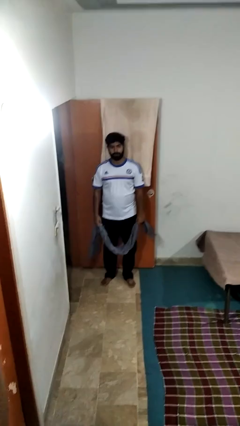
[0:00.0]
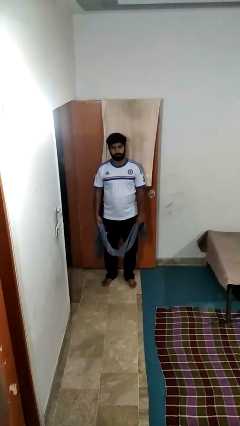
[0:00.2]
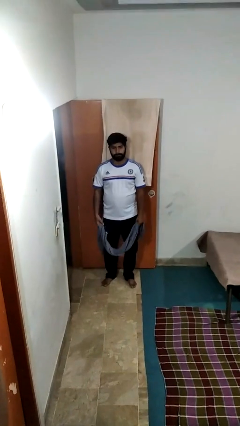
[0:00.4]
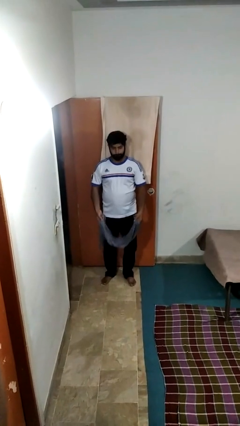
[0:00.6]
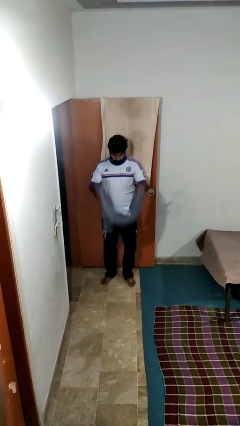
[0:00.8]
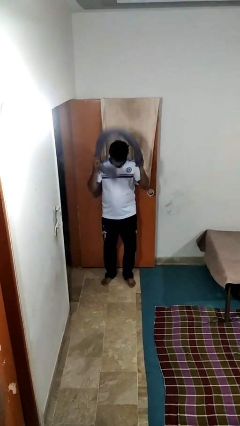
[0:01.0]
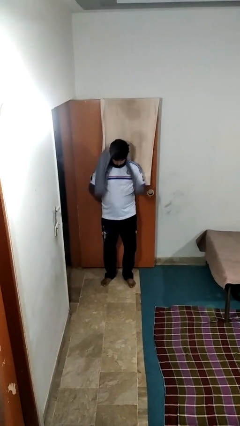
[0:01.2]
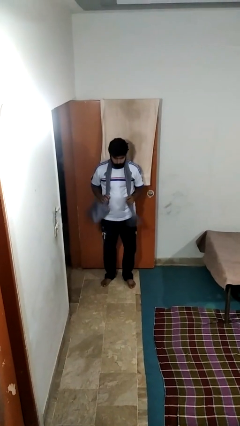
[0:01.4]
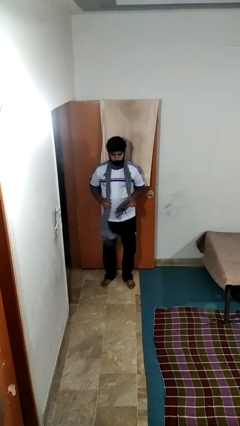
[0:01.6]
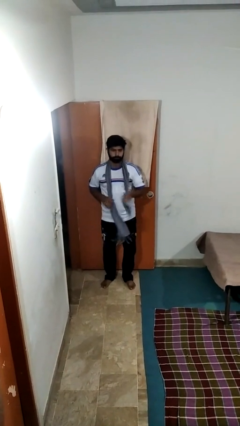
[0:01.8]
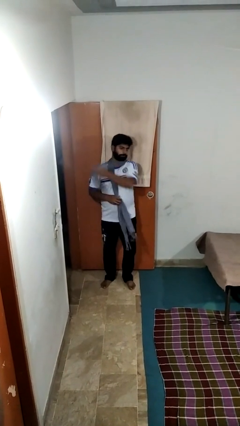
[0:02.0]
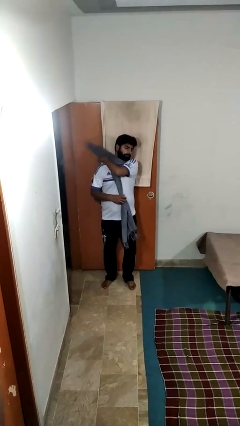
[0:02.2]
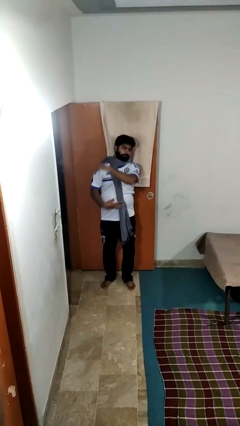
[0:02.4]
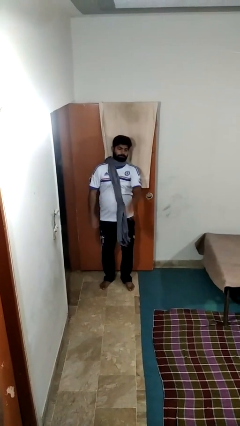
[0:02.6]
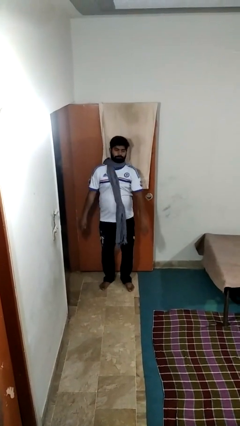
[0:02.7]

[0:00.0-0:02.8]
person puts on scarf

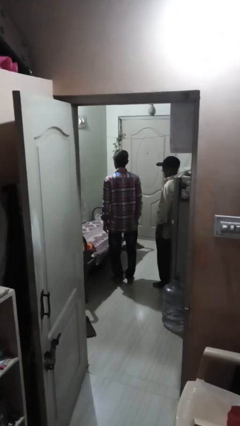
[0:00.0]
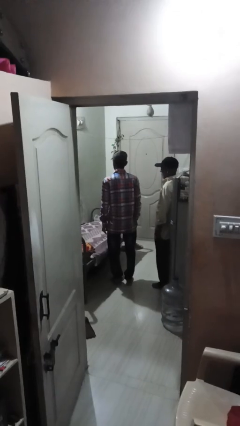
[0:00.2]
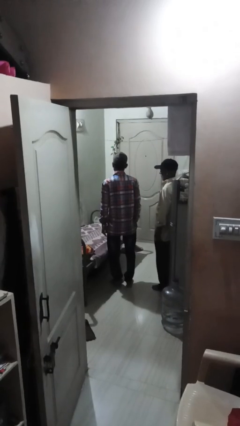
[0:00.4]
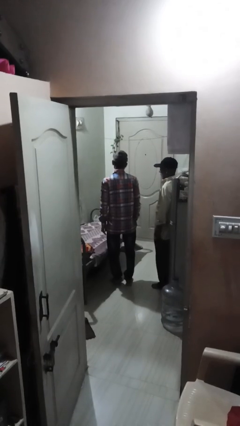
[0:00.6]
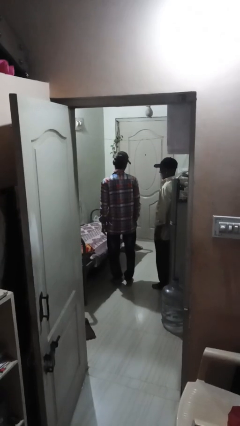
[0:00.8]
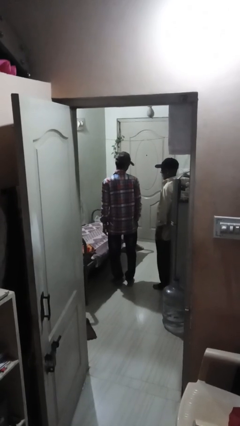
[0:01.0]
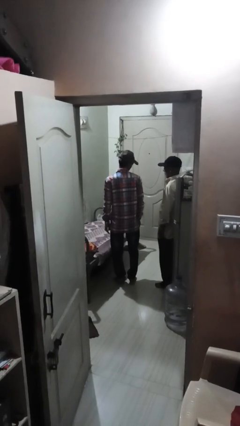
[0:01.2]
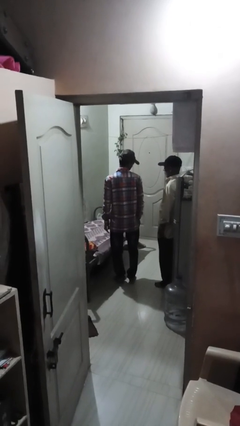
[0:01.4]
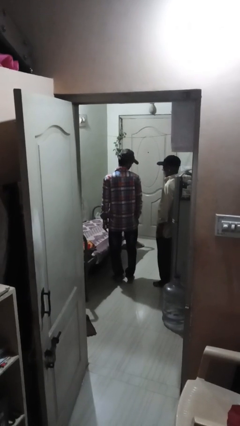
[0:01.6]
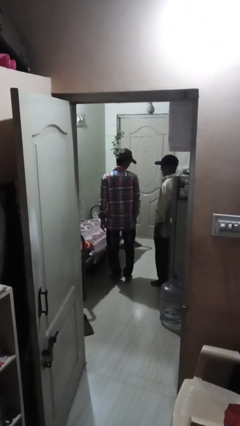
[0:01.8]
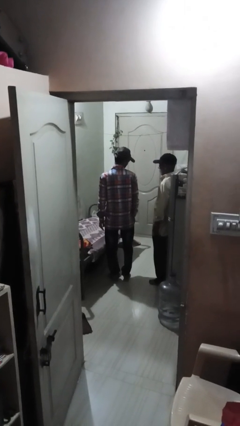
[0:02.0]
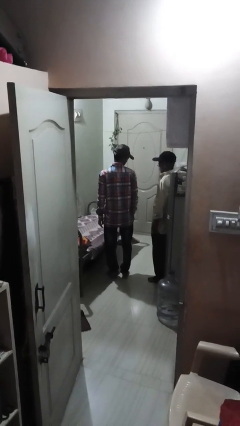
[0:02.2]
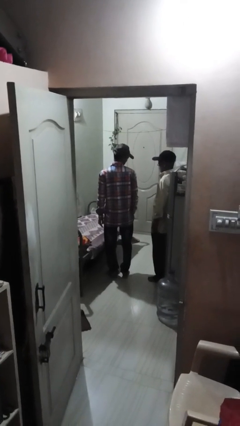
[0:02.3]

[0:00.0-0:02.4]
person looks over shoulder

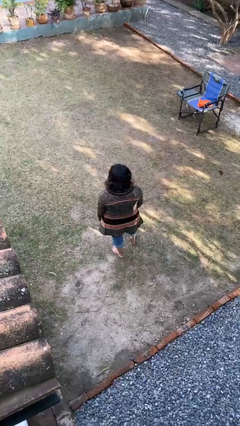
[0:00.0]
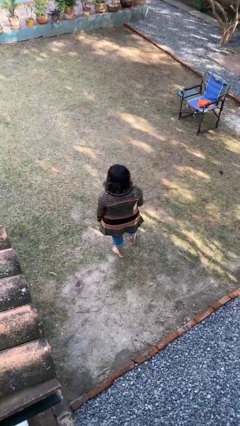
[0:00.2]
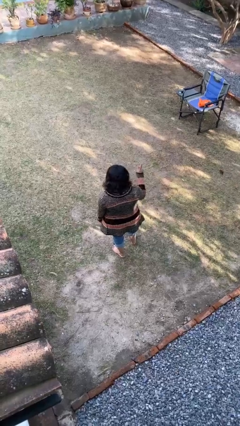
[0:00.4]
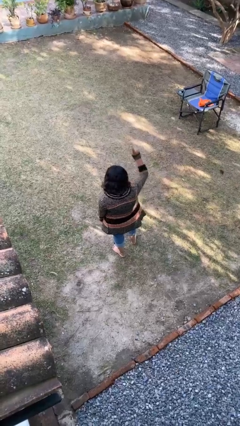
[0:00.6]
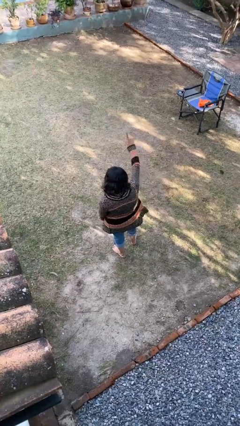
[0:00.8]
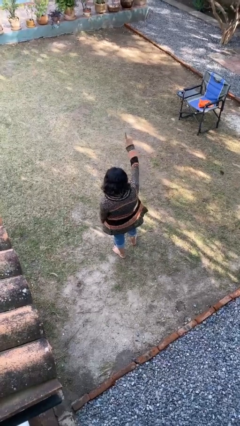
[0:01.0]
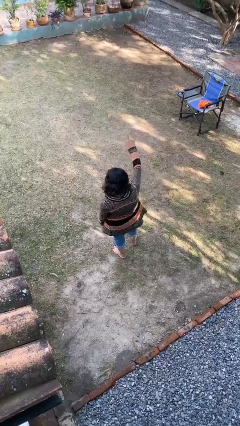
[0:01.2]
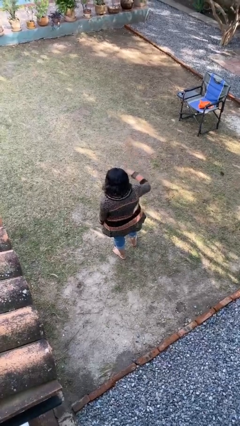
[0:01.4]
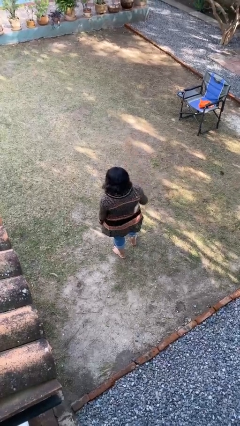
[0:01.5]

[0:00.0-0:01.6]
person gestures number one

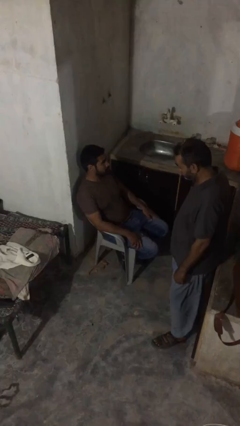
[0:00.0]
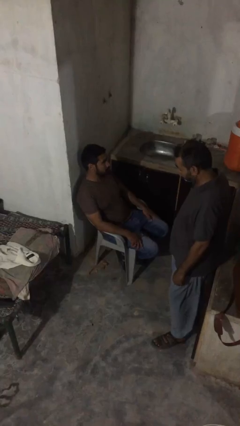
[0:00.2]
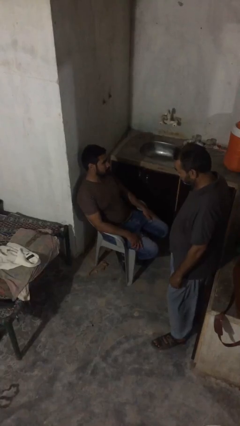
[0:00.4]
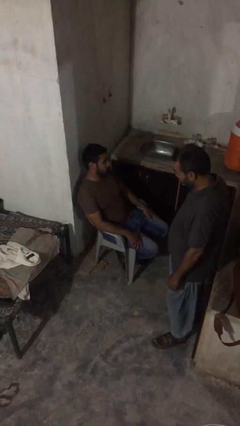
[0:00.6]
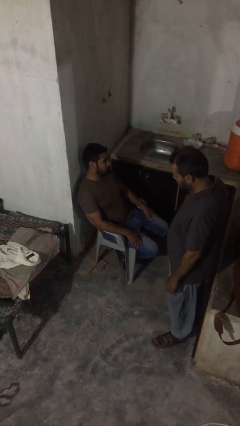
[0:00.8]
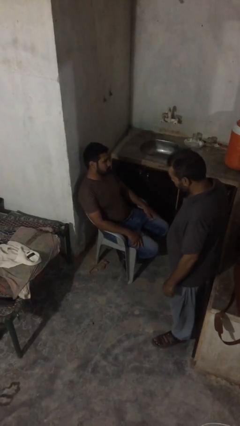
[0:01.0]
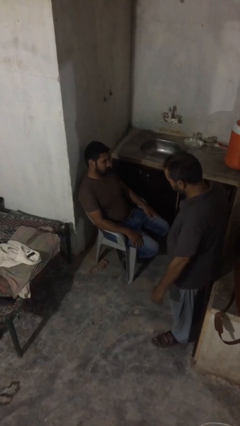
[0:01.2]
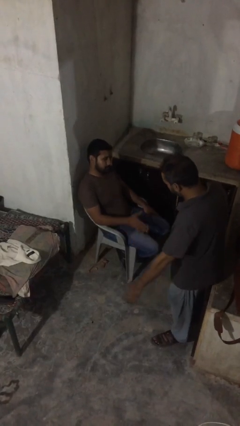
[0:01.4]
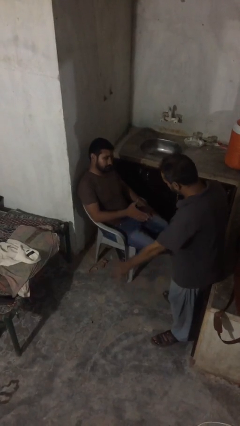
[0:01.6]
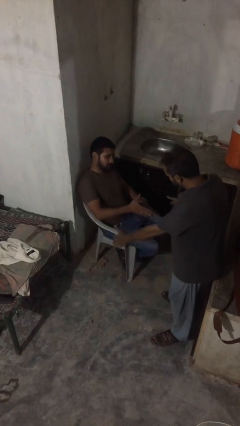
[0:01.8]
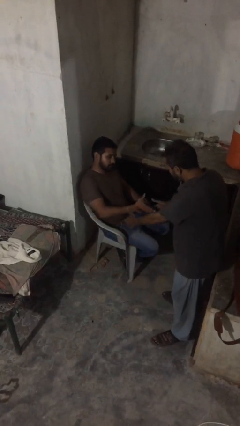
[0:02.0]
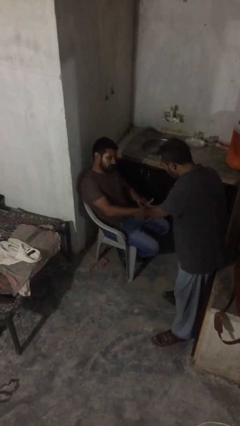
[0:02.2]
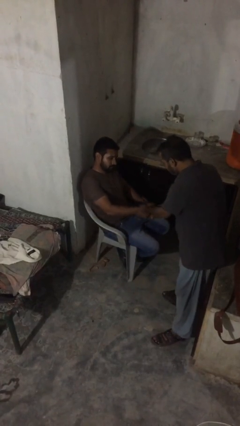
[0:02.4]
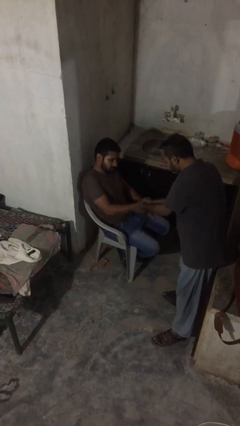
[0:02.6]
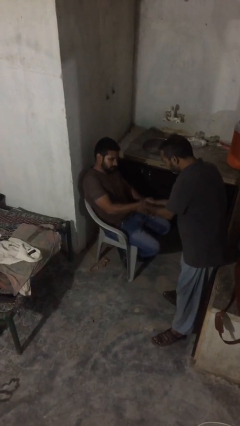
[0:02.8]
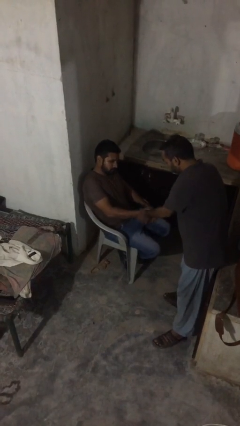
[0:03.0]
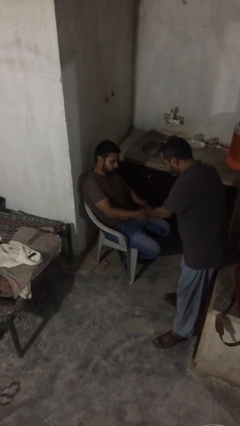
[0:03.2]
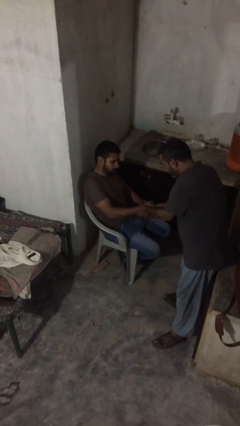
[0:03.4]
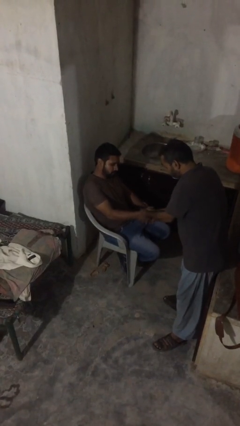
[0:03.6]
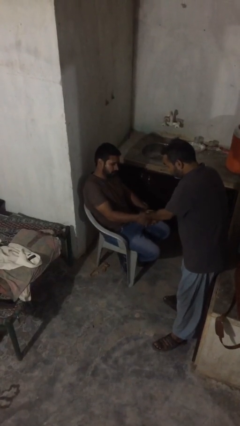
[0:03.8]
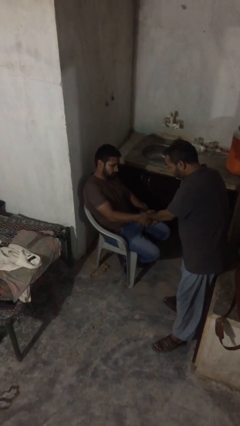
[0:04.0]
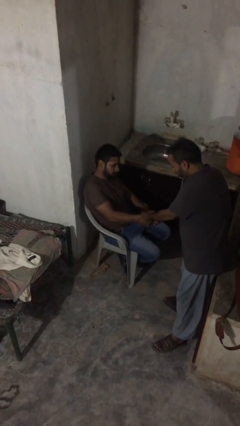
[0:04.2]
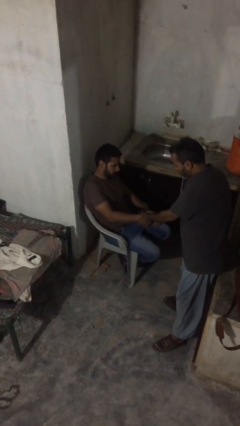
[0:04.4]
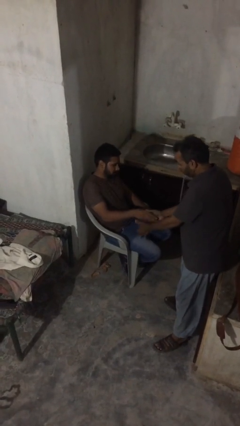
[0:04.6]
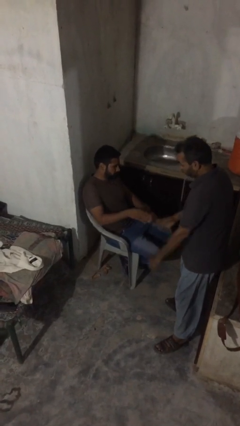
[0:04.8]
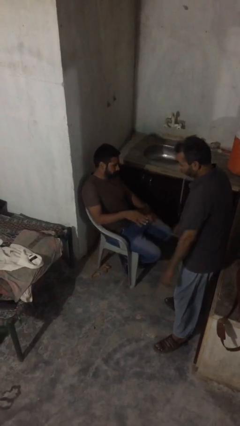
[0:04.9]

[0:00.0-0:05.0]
person shakes hand

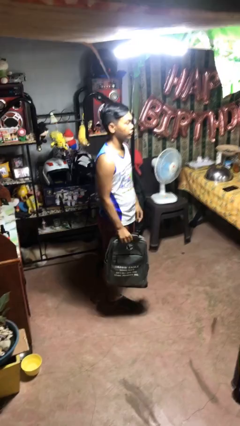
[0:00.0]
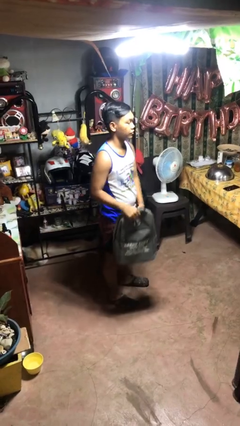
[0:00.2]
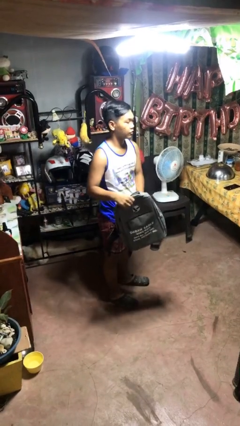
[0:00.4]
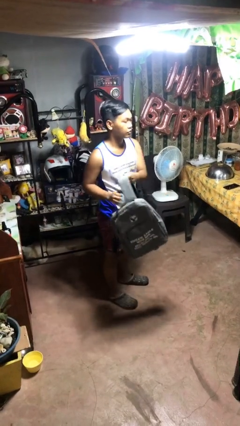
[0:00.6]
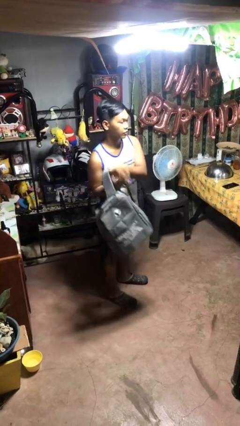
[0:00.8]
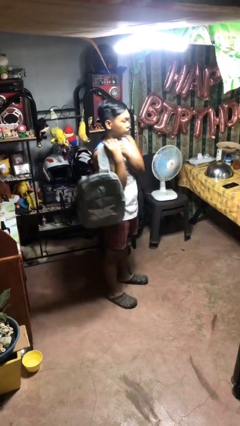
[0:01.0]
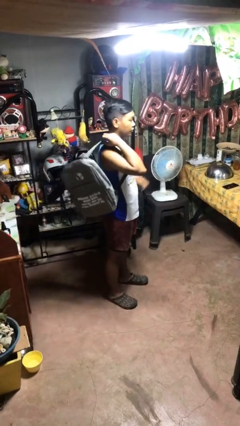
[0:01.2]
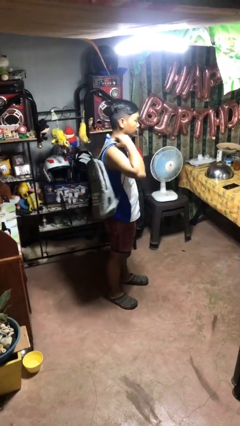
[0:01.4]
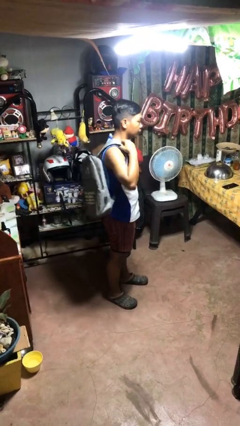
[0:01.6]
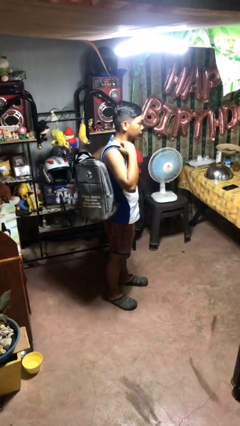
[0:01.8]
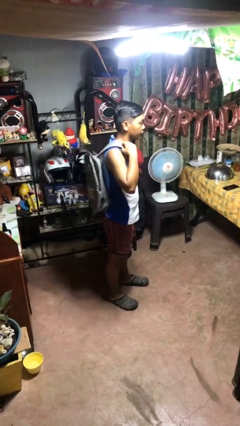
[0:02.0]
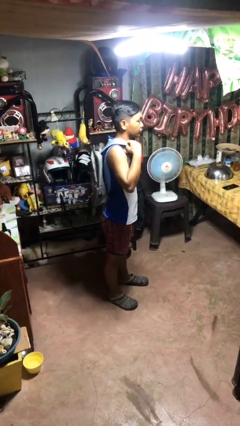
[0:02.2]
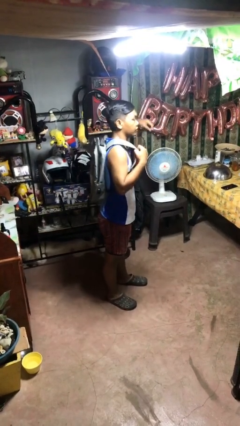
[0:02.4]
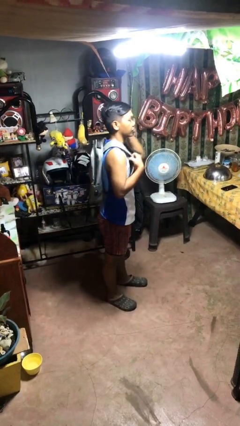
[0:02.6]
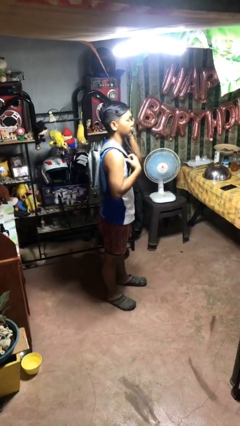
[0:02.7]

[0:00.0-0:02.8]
person puts on backpack

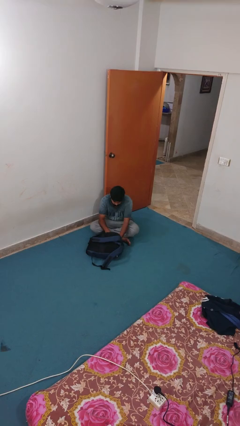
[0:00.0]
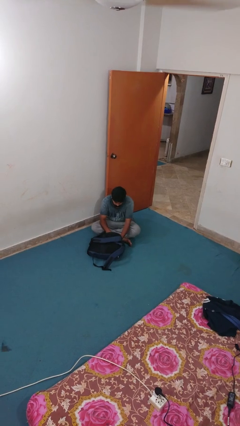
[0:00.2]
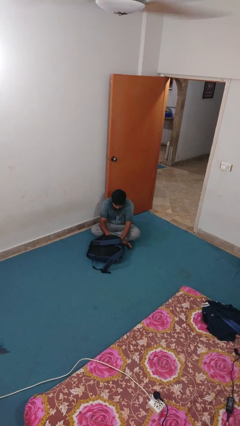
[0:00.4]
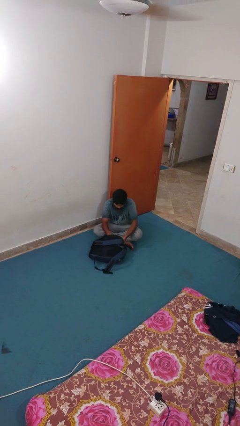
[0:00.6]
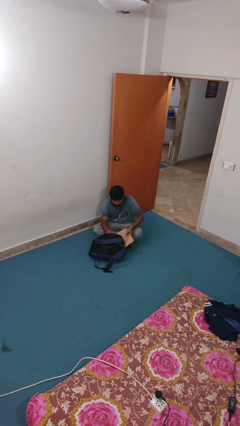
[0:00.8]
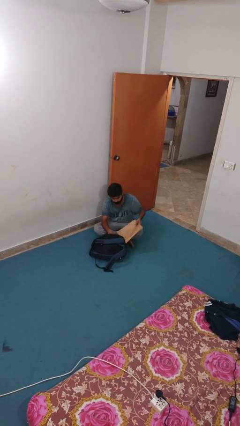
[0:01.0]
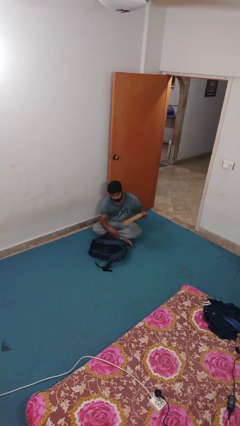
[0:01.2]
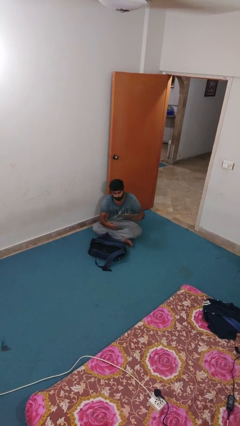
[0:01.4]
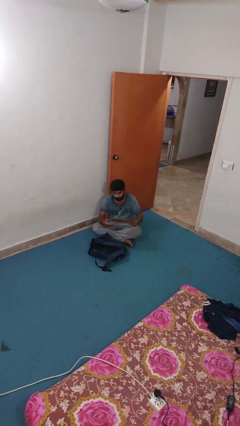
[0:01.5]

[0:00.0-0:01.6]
person takes object from backpack

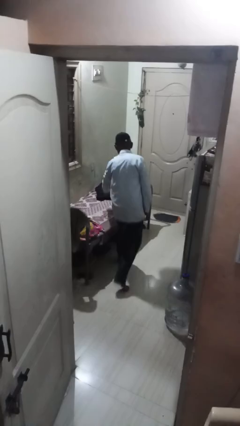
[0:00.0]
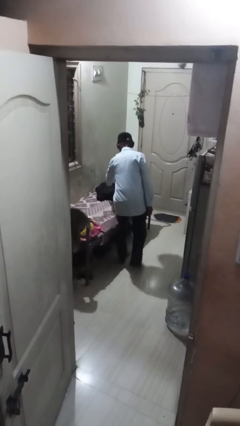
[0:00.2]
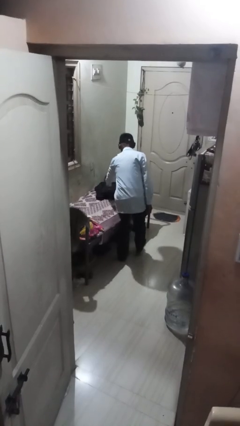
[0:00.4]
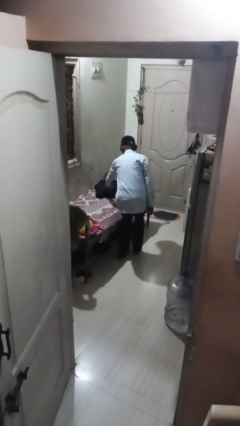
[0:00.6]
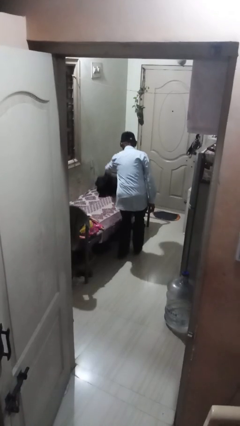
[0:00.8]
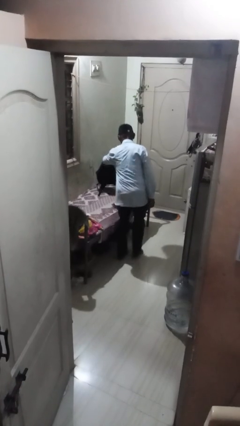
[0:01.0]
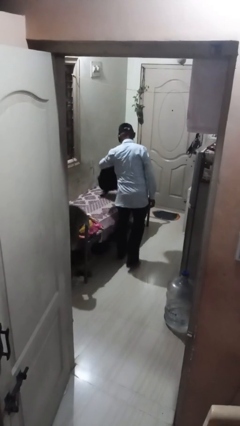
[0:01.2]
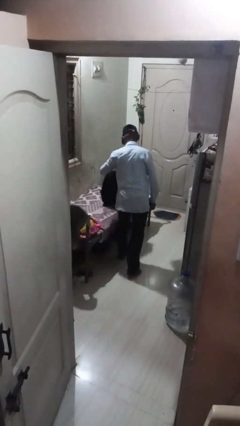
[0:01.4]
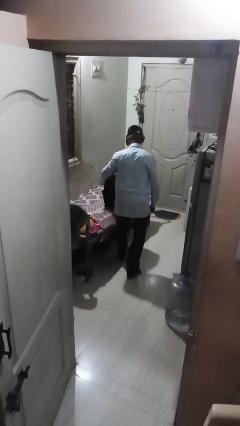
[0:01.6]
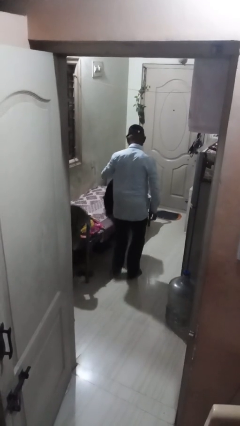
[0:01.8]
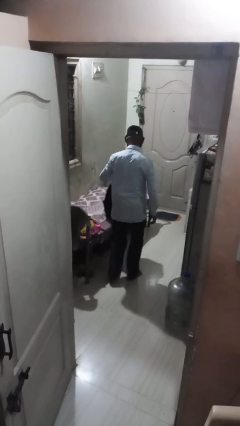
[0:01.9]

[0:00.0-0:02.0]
person picks up object from bed
